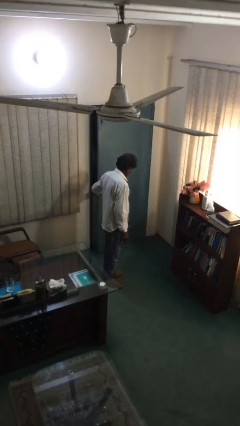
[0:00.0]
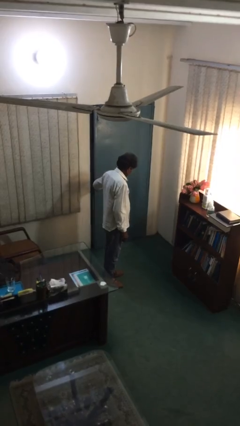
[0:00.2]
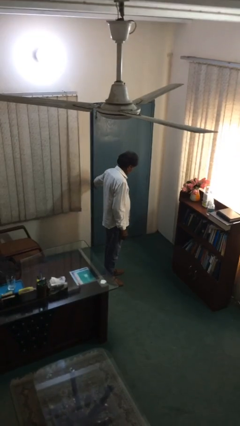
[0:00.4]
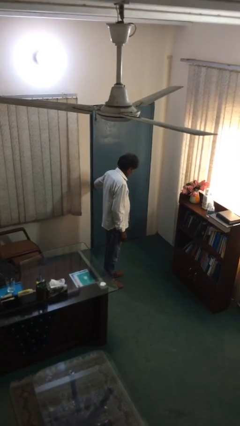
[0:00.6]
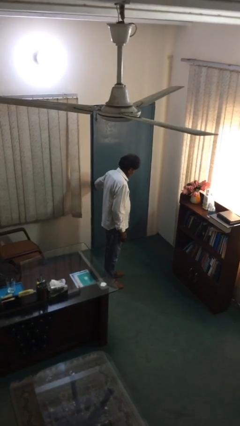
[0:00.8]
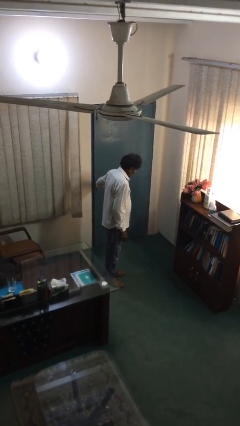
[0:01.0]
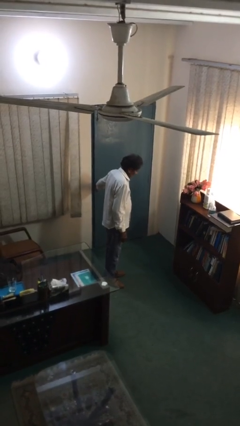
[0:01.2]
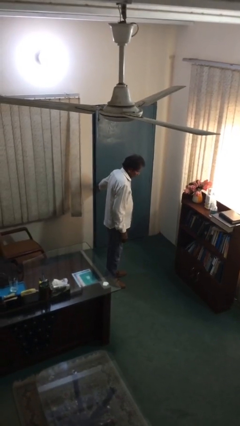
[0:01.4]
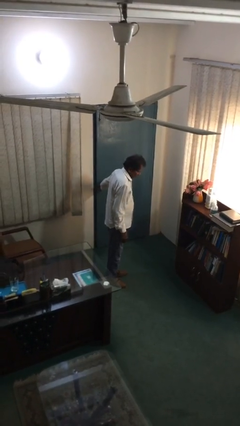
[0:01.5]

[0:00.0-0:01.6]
person closes facility door

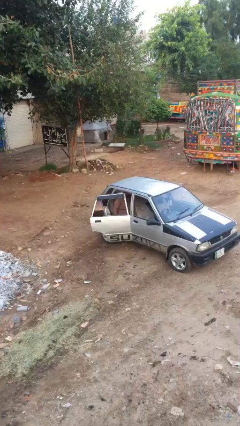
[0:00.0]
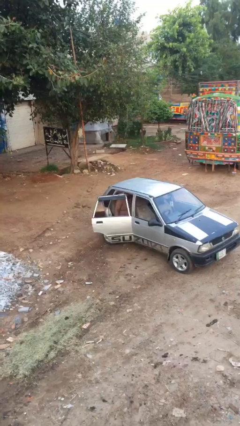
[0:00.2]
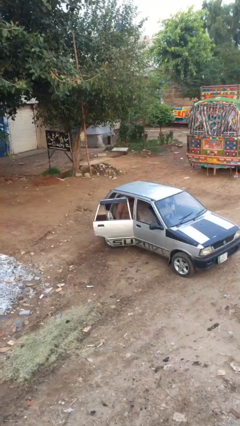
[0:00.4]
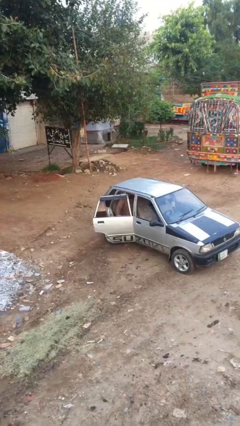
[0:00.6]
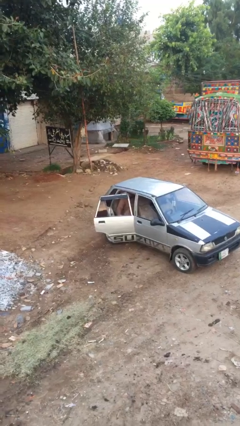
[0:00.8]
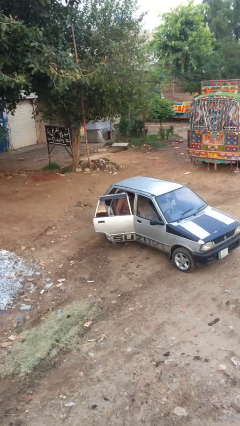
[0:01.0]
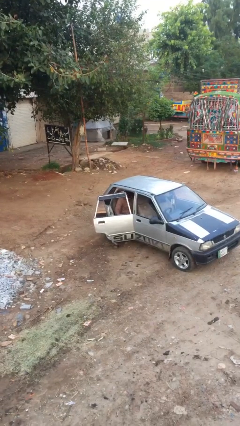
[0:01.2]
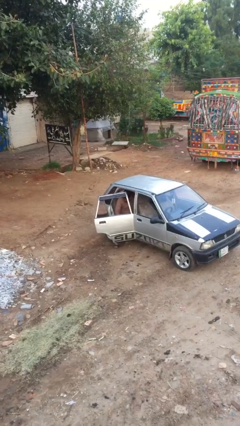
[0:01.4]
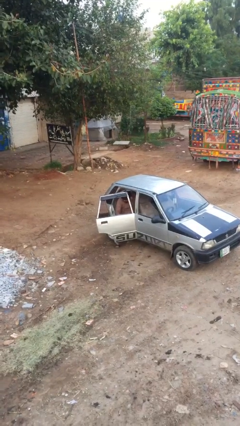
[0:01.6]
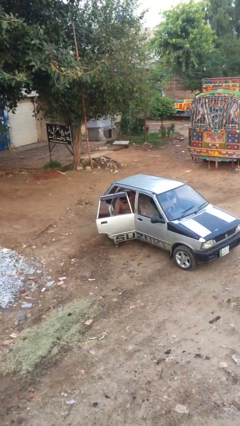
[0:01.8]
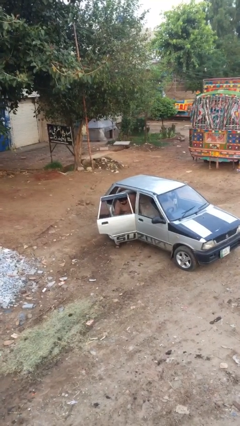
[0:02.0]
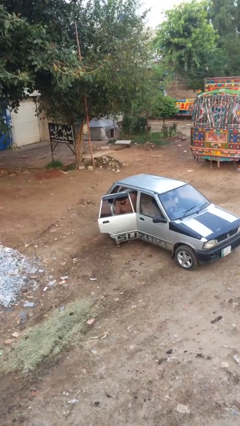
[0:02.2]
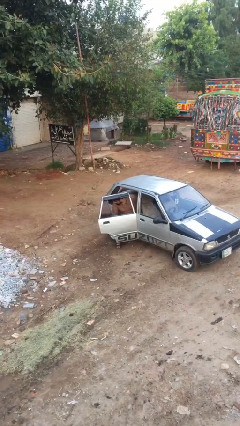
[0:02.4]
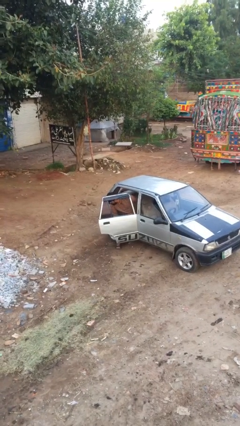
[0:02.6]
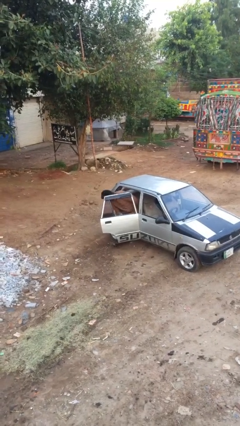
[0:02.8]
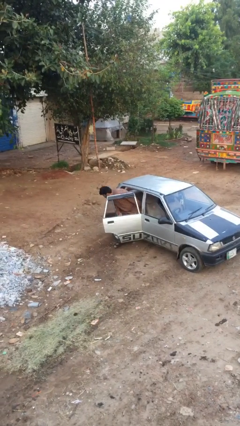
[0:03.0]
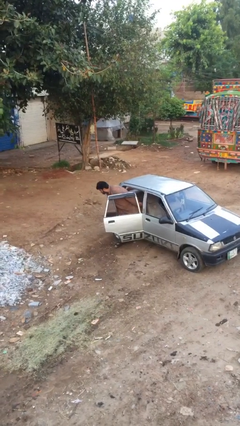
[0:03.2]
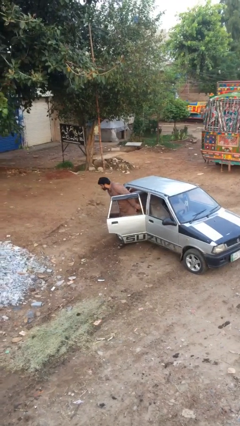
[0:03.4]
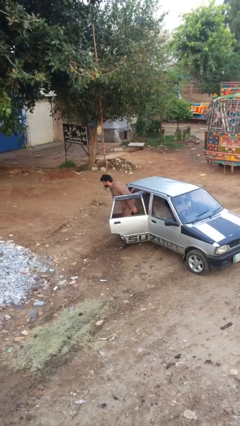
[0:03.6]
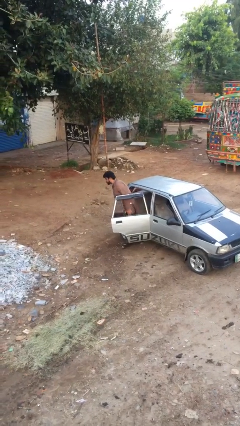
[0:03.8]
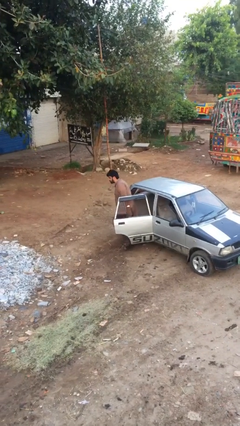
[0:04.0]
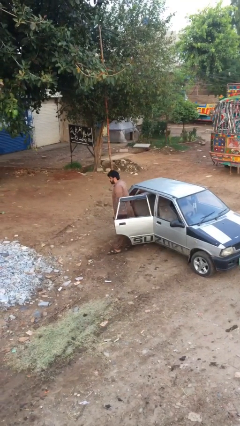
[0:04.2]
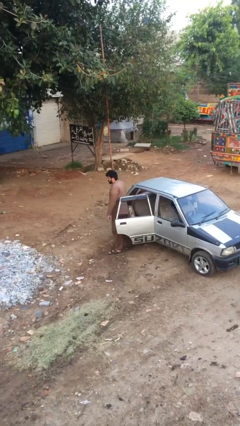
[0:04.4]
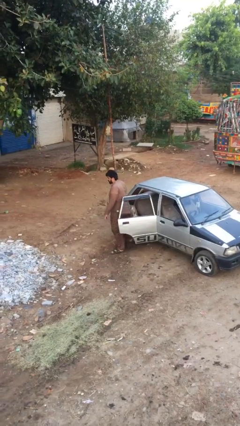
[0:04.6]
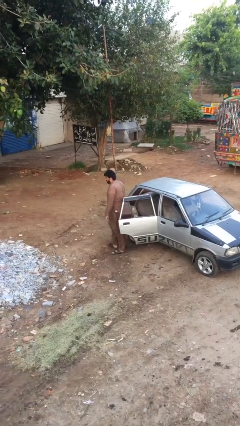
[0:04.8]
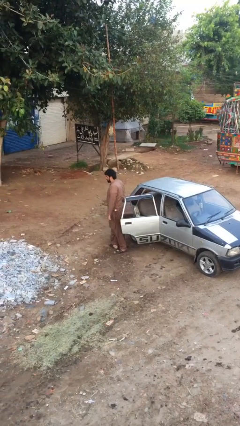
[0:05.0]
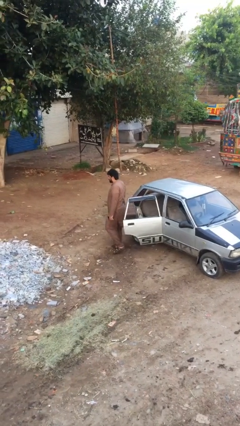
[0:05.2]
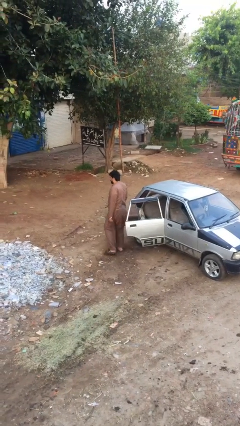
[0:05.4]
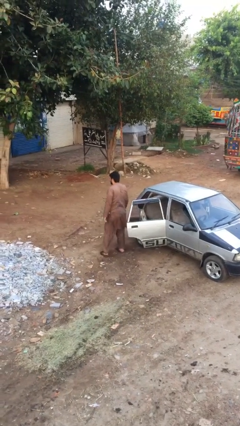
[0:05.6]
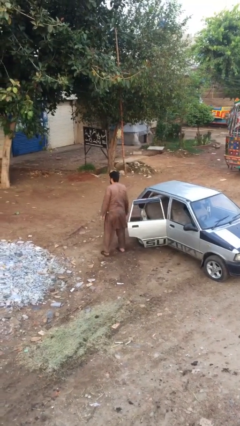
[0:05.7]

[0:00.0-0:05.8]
person exits car

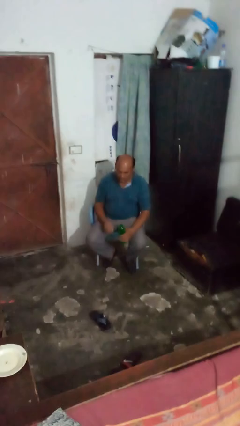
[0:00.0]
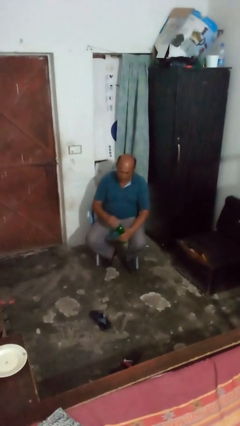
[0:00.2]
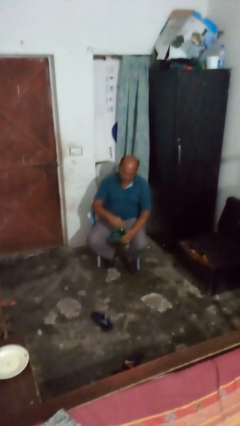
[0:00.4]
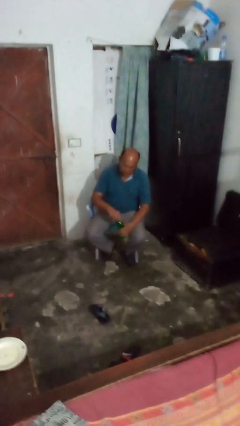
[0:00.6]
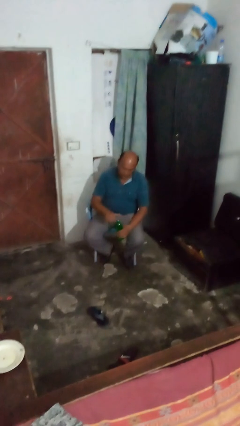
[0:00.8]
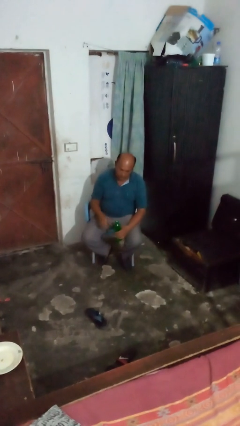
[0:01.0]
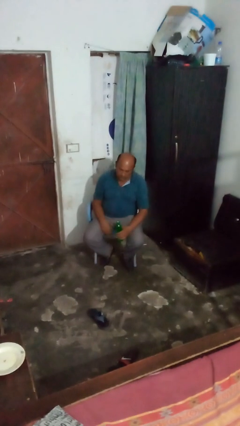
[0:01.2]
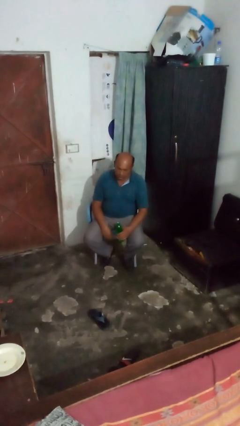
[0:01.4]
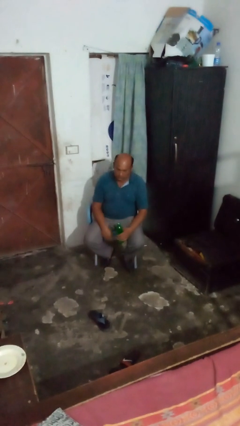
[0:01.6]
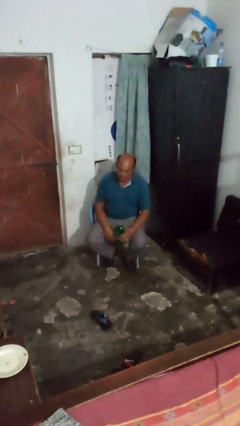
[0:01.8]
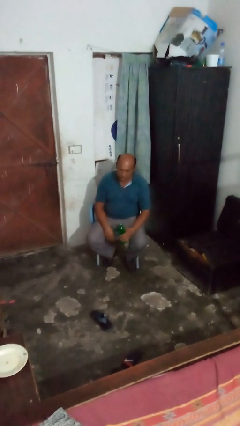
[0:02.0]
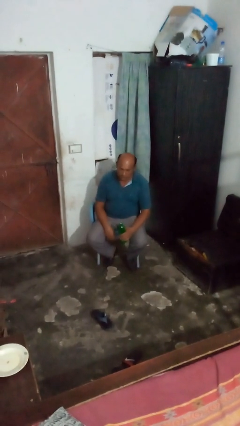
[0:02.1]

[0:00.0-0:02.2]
person screws lid to bottle

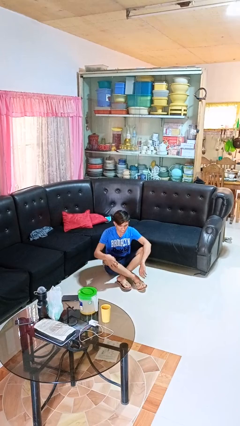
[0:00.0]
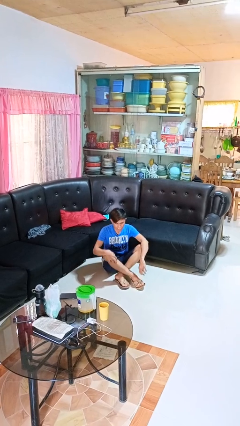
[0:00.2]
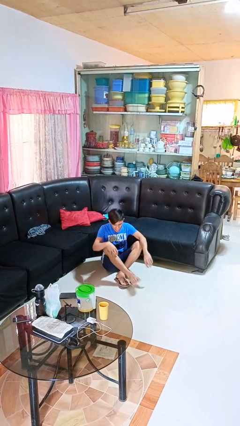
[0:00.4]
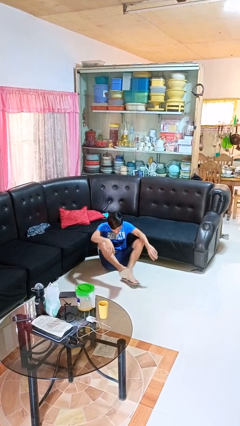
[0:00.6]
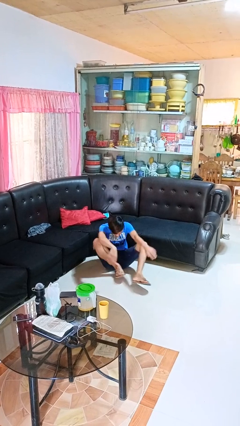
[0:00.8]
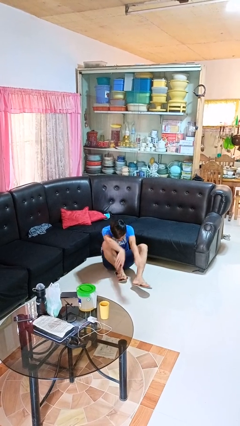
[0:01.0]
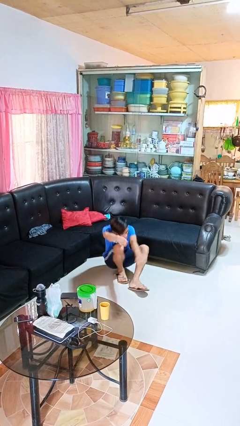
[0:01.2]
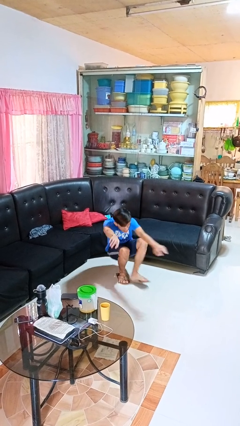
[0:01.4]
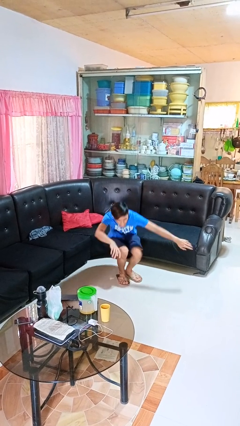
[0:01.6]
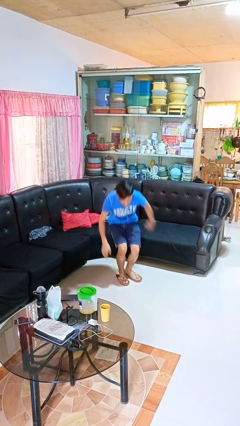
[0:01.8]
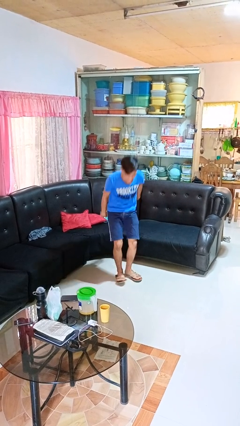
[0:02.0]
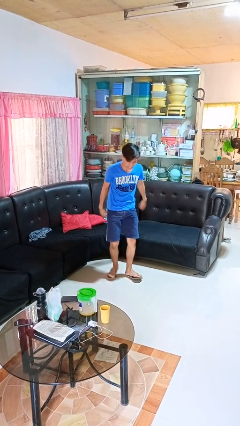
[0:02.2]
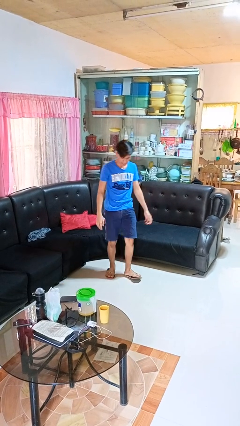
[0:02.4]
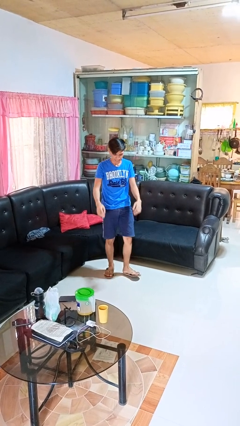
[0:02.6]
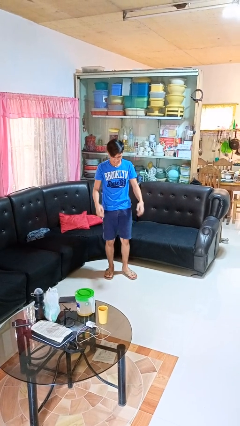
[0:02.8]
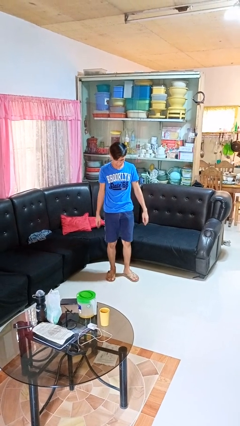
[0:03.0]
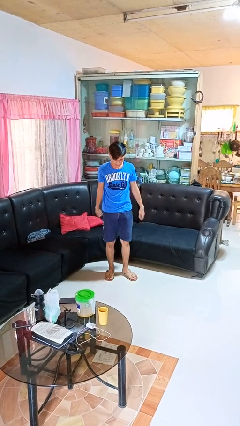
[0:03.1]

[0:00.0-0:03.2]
person stands up from floor

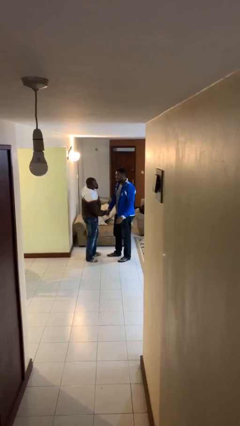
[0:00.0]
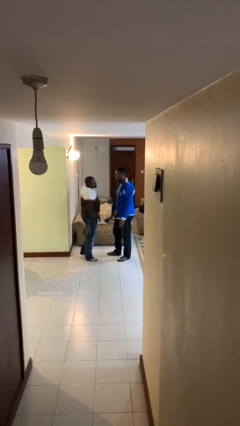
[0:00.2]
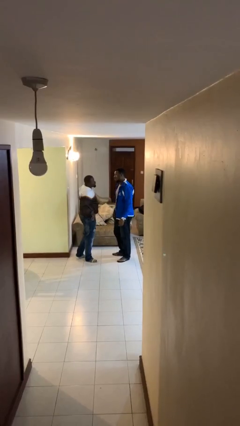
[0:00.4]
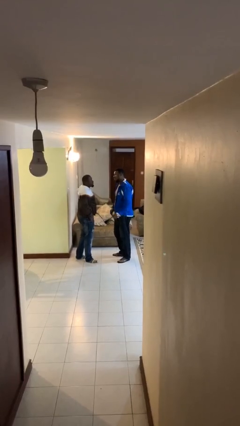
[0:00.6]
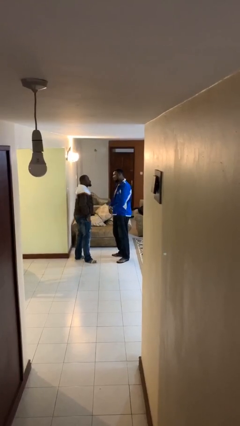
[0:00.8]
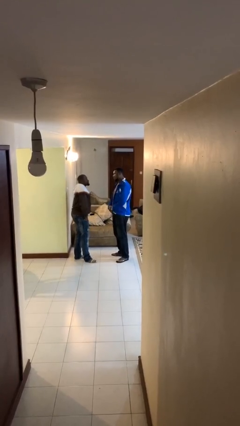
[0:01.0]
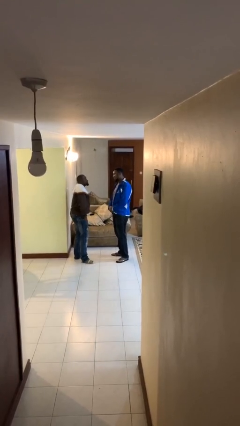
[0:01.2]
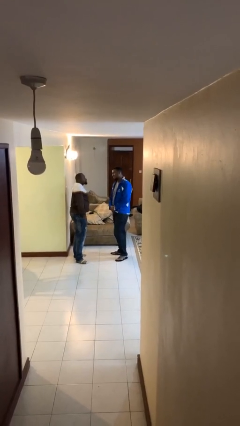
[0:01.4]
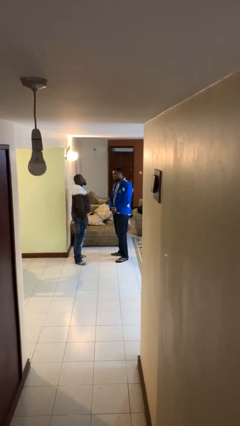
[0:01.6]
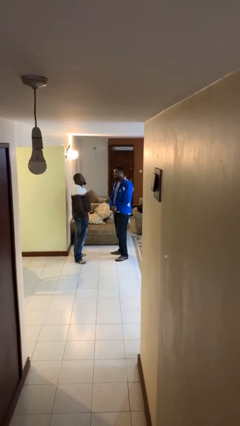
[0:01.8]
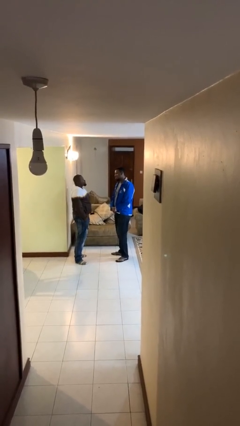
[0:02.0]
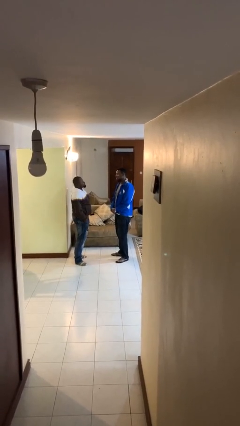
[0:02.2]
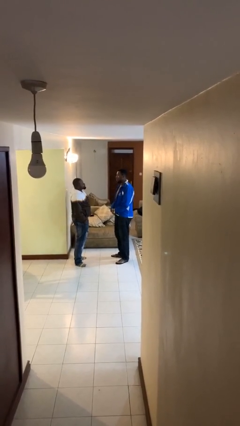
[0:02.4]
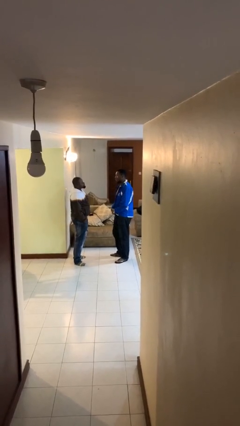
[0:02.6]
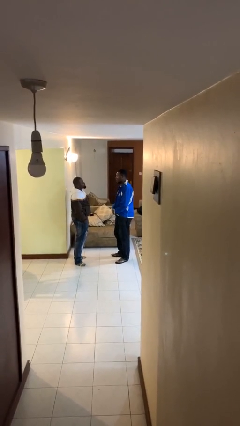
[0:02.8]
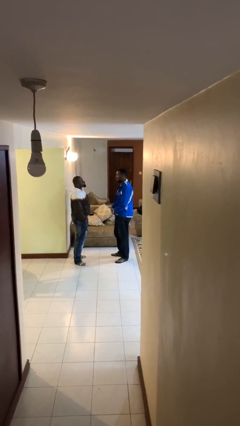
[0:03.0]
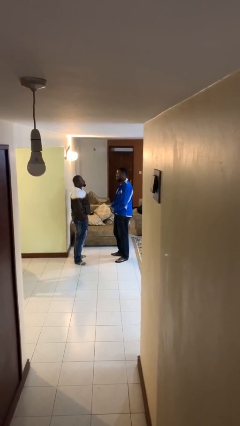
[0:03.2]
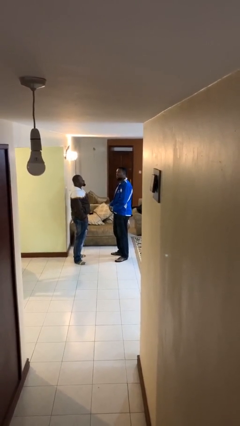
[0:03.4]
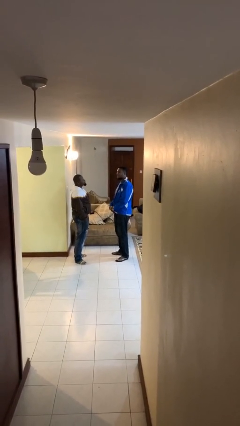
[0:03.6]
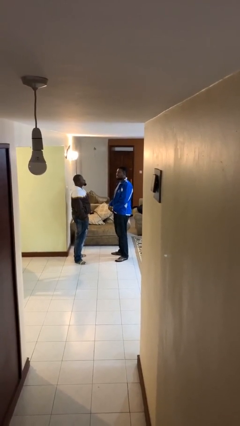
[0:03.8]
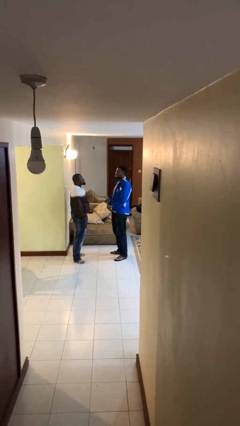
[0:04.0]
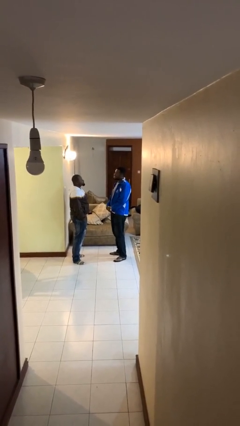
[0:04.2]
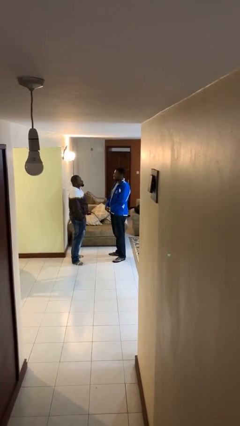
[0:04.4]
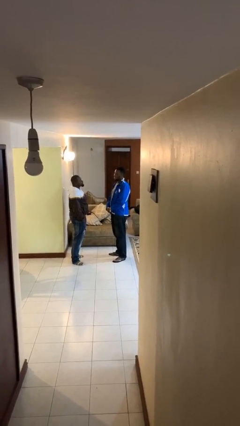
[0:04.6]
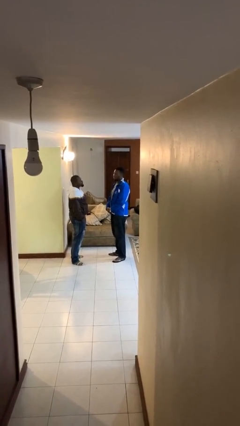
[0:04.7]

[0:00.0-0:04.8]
person talks to person
